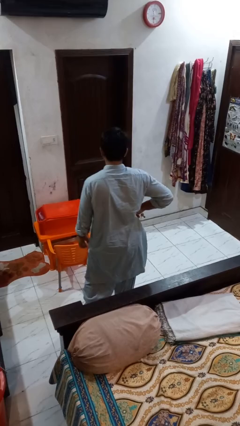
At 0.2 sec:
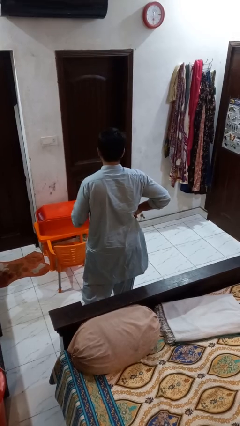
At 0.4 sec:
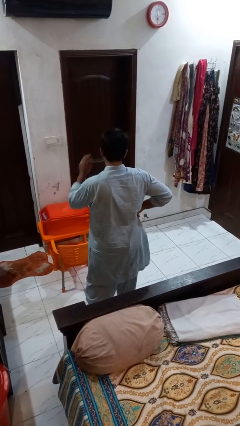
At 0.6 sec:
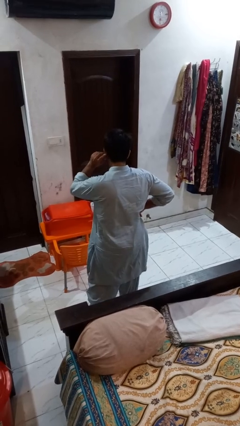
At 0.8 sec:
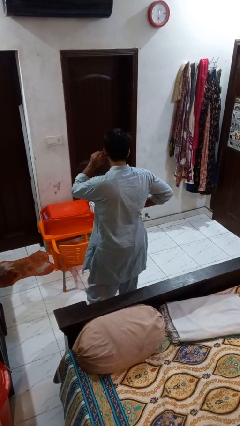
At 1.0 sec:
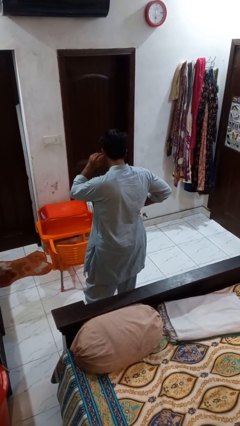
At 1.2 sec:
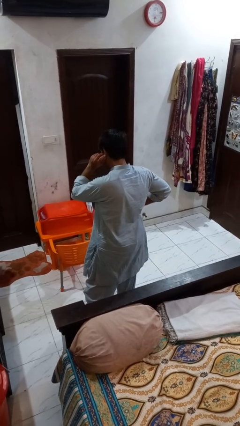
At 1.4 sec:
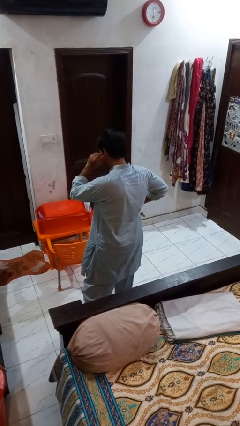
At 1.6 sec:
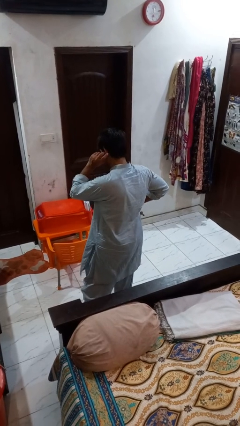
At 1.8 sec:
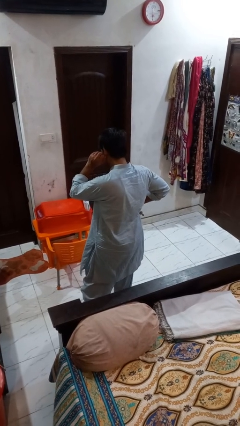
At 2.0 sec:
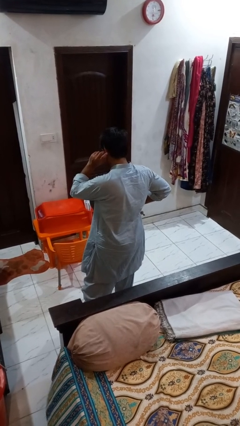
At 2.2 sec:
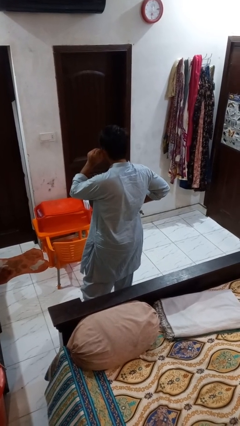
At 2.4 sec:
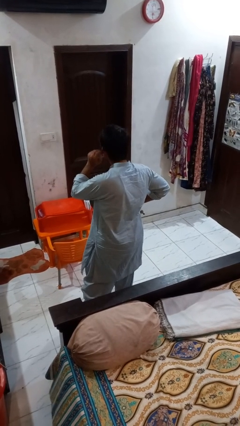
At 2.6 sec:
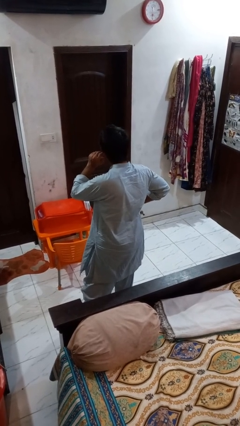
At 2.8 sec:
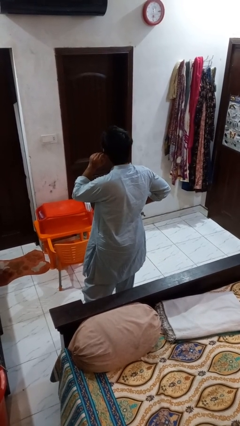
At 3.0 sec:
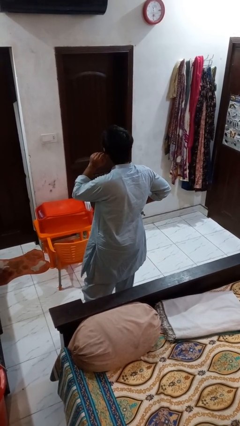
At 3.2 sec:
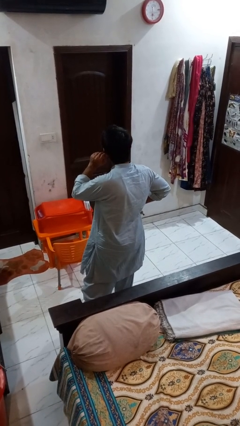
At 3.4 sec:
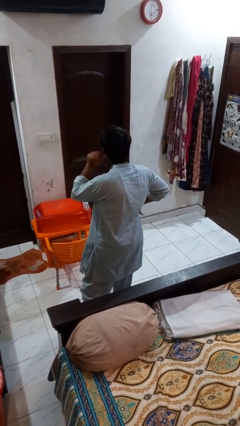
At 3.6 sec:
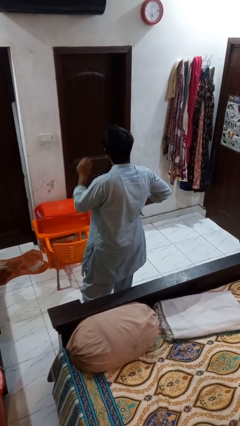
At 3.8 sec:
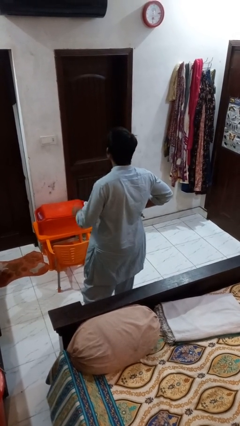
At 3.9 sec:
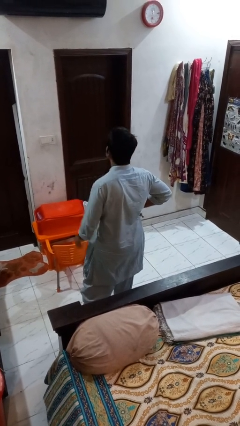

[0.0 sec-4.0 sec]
person touches earlobe

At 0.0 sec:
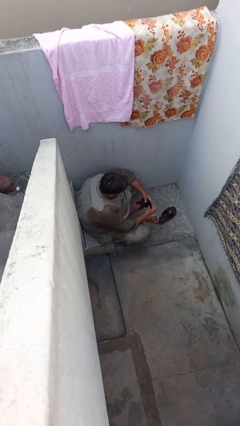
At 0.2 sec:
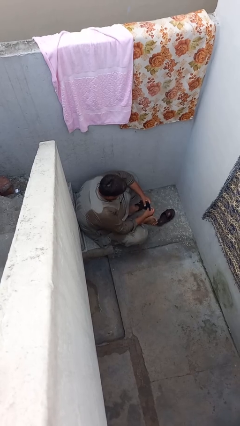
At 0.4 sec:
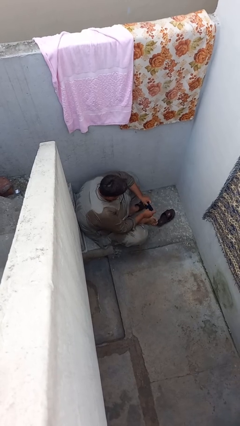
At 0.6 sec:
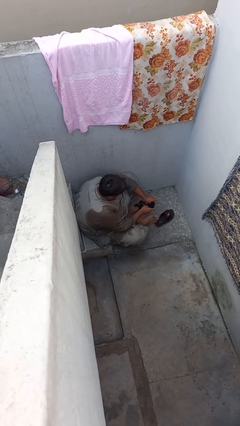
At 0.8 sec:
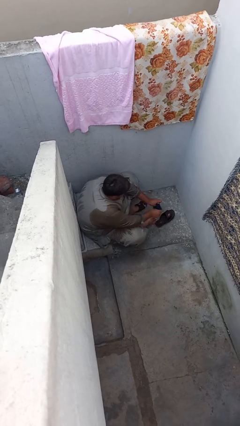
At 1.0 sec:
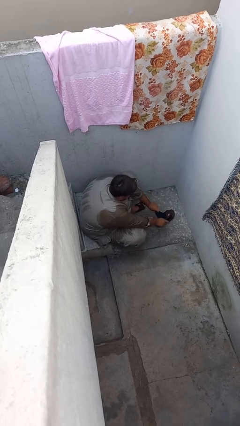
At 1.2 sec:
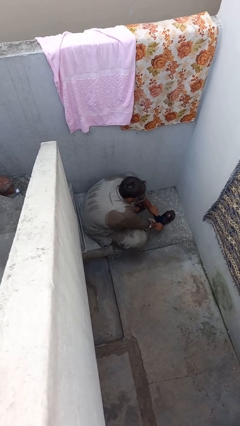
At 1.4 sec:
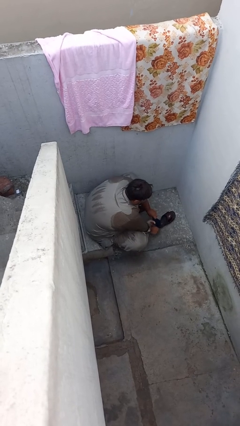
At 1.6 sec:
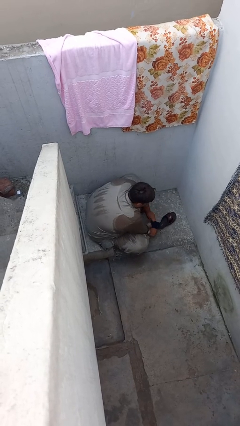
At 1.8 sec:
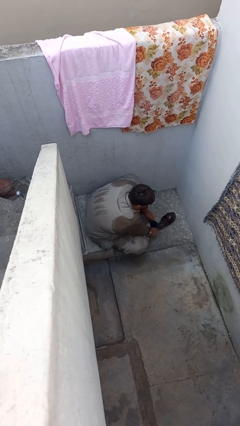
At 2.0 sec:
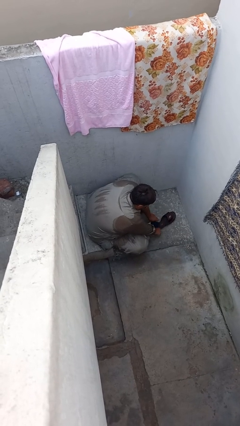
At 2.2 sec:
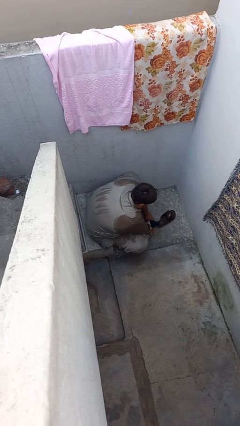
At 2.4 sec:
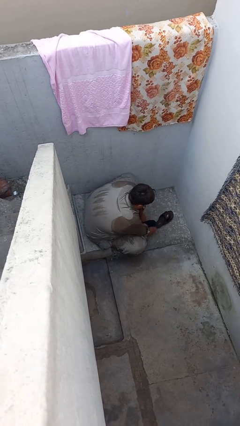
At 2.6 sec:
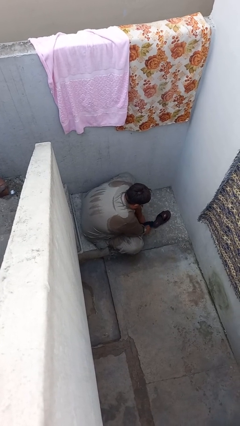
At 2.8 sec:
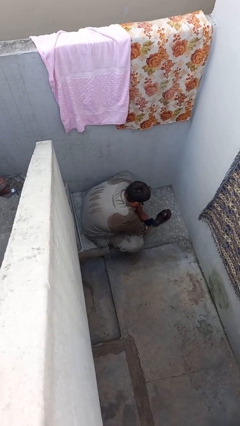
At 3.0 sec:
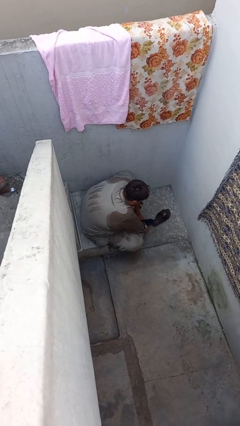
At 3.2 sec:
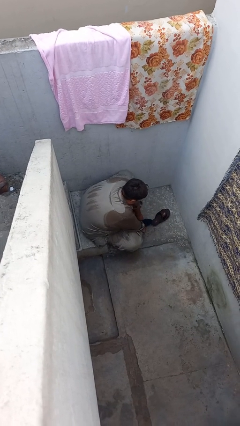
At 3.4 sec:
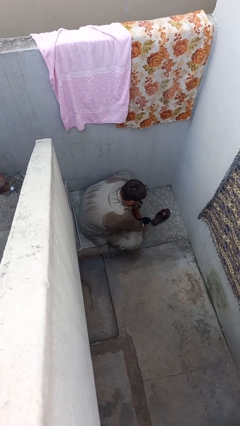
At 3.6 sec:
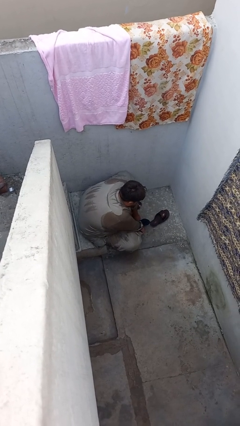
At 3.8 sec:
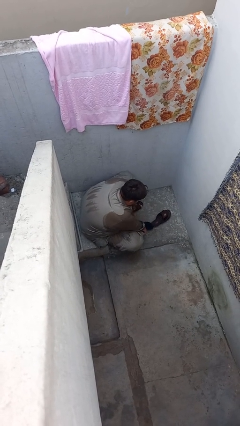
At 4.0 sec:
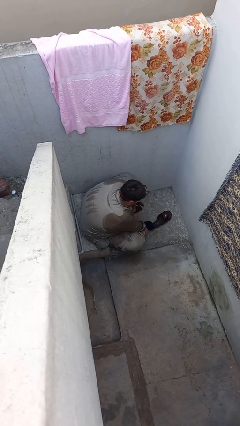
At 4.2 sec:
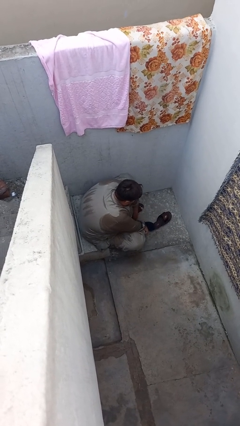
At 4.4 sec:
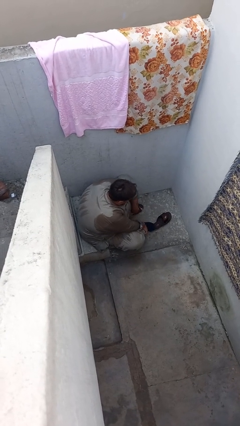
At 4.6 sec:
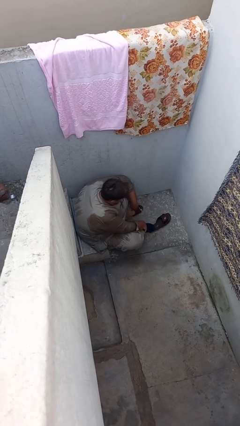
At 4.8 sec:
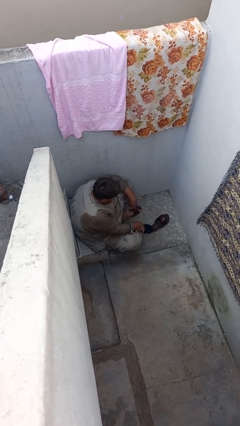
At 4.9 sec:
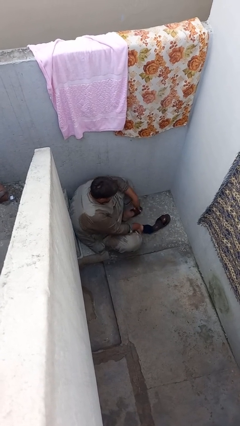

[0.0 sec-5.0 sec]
person puts on socks

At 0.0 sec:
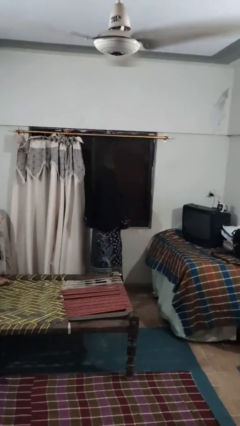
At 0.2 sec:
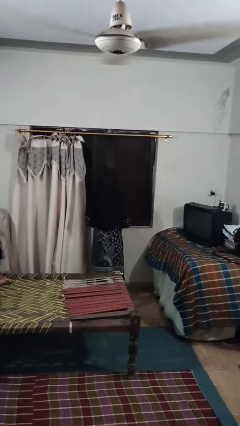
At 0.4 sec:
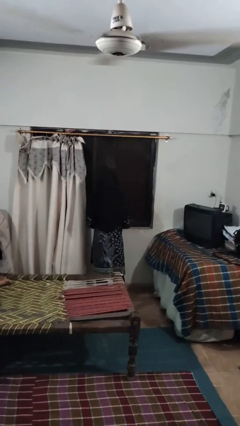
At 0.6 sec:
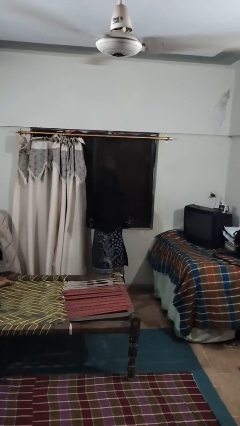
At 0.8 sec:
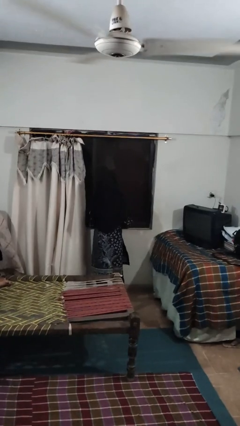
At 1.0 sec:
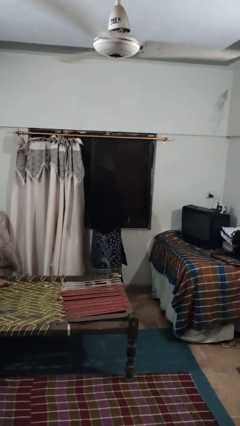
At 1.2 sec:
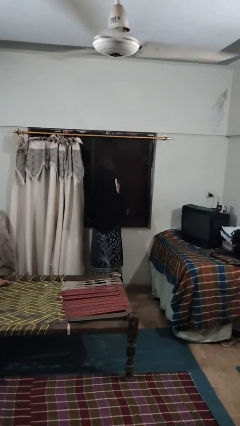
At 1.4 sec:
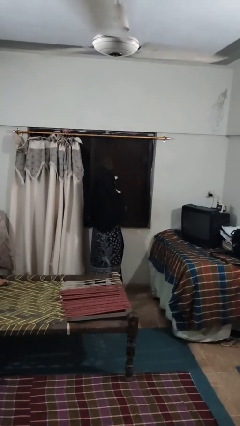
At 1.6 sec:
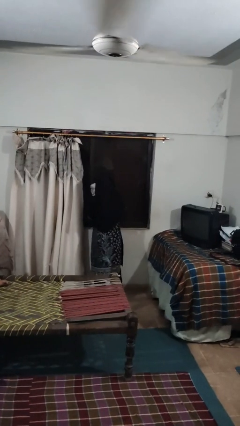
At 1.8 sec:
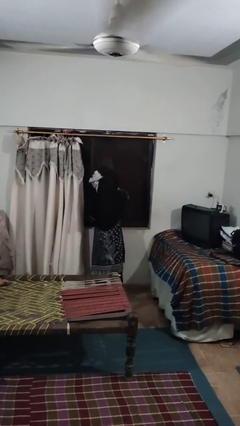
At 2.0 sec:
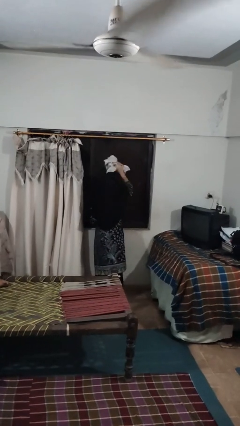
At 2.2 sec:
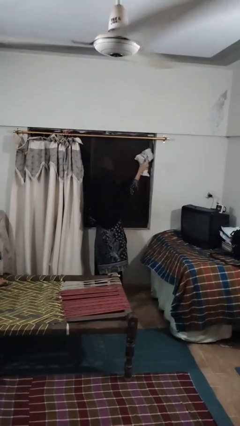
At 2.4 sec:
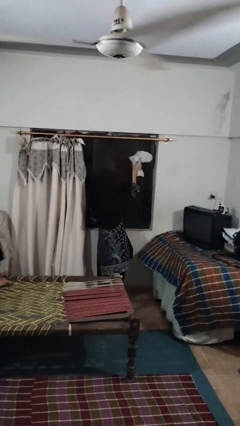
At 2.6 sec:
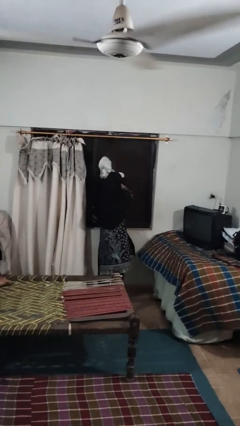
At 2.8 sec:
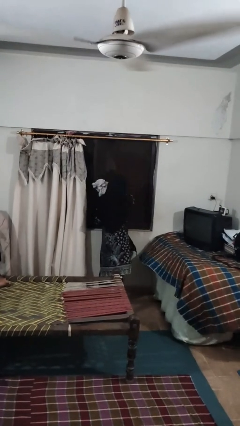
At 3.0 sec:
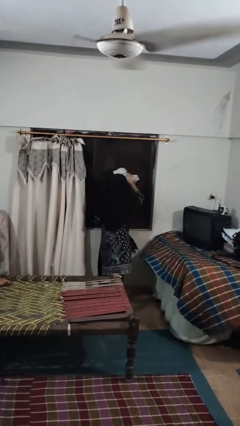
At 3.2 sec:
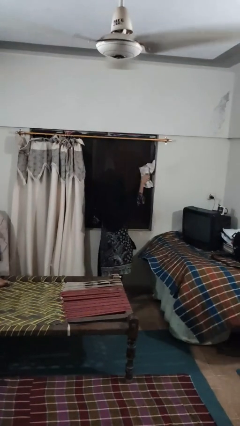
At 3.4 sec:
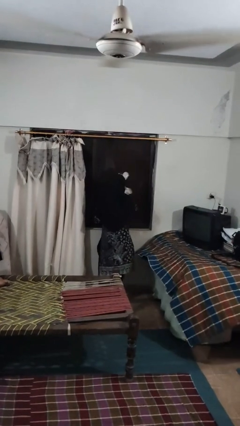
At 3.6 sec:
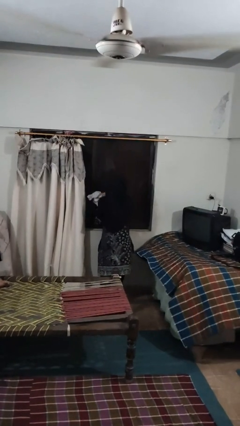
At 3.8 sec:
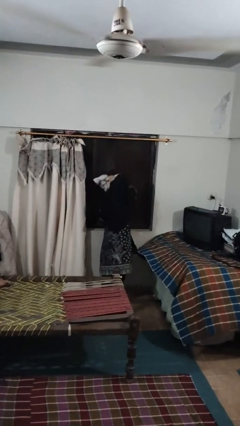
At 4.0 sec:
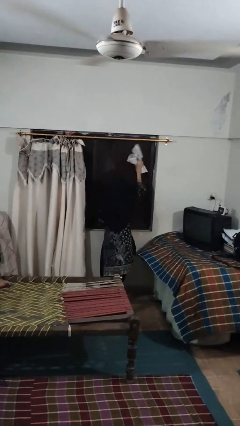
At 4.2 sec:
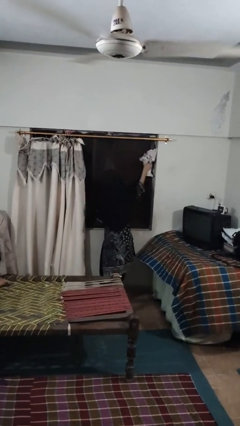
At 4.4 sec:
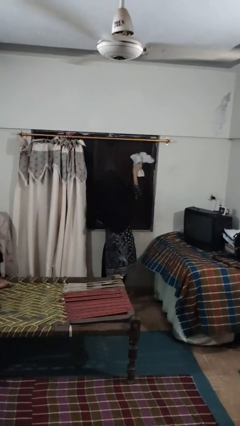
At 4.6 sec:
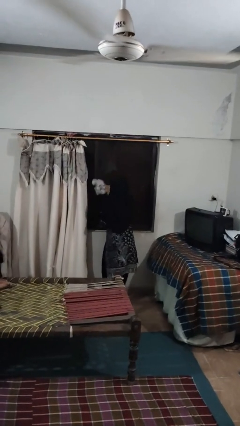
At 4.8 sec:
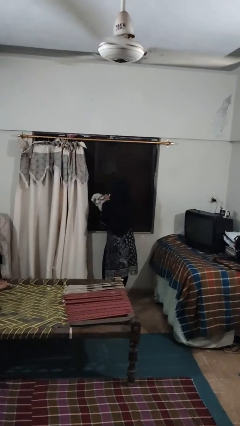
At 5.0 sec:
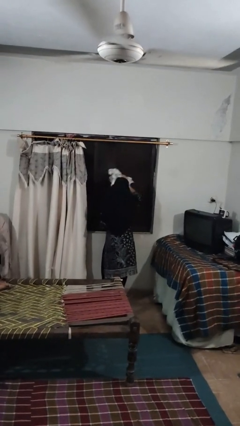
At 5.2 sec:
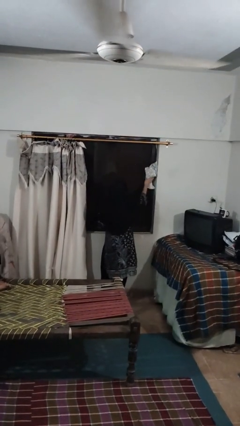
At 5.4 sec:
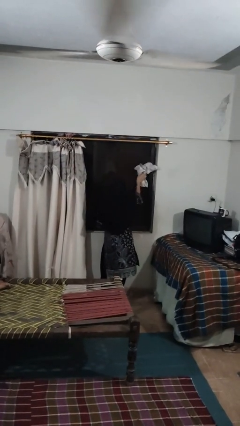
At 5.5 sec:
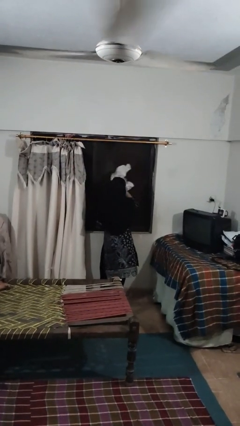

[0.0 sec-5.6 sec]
person washes window

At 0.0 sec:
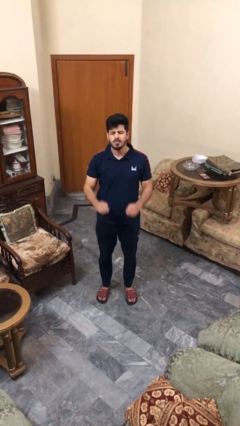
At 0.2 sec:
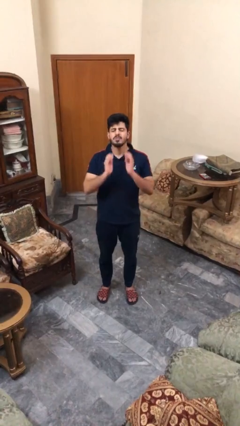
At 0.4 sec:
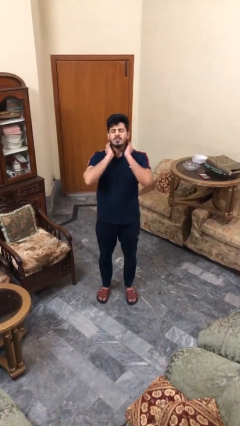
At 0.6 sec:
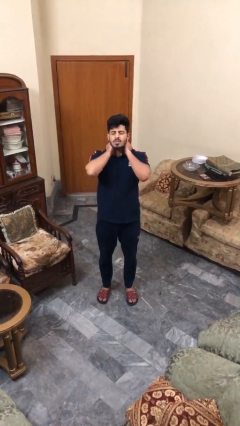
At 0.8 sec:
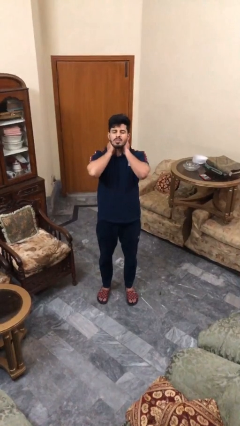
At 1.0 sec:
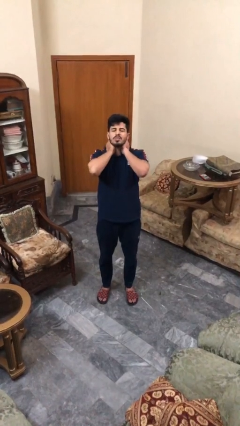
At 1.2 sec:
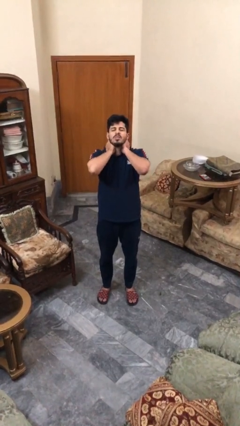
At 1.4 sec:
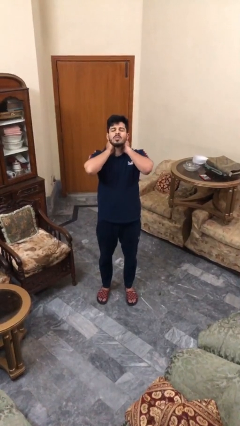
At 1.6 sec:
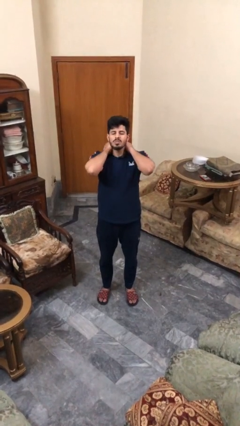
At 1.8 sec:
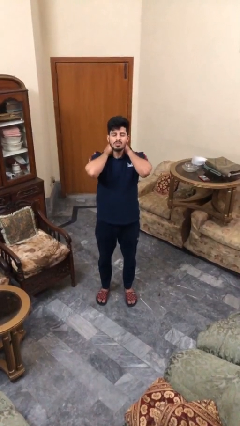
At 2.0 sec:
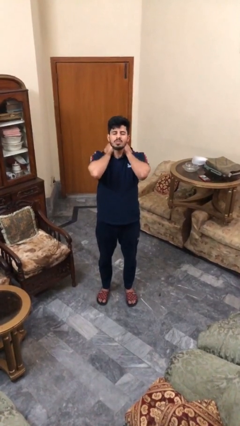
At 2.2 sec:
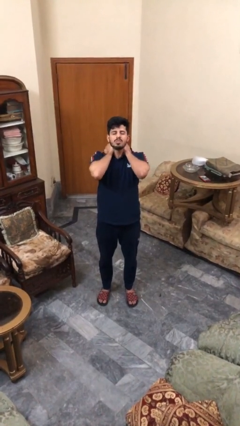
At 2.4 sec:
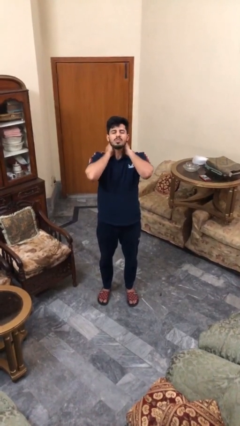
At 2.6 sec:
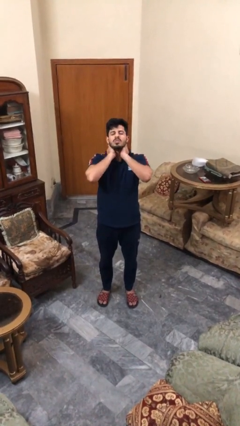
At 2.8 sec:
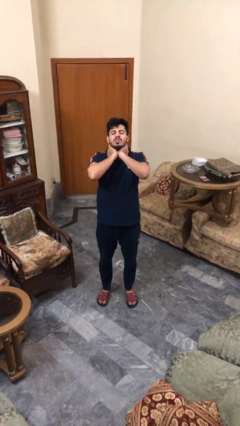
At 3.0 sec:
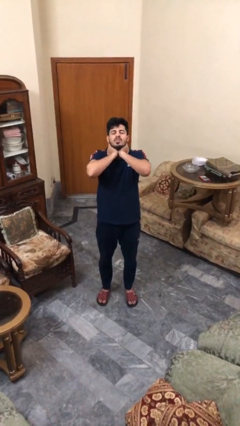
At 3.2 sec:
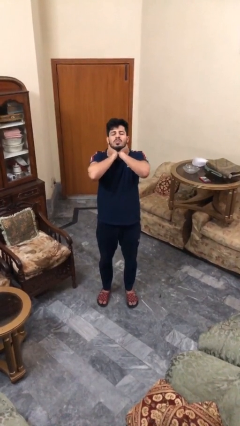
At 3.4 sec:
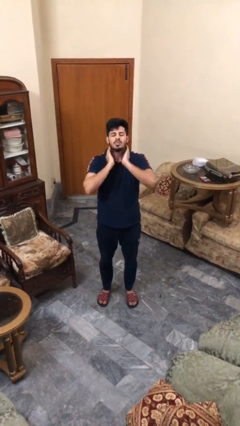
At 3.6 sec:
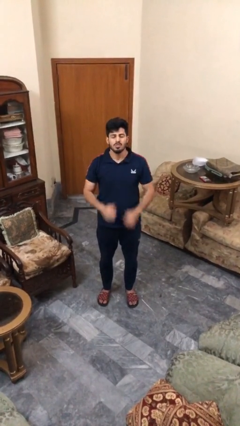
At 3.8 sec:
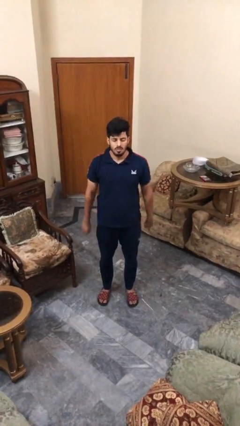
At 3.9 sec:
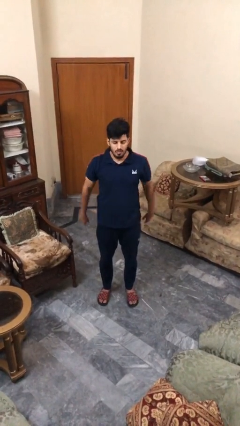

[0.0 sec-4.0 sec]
person rubs neck
